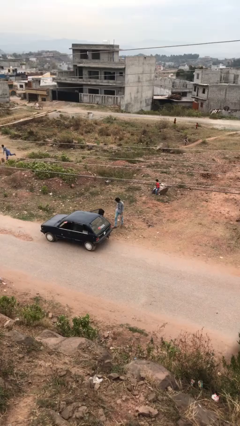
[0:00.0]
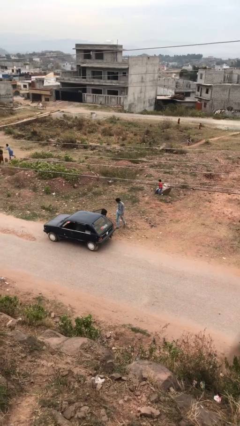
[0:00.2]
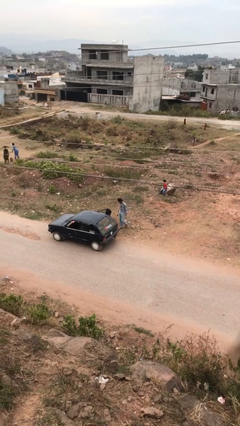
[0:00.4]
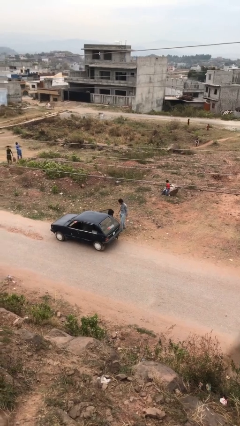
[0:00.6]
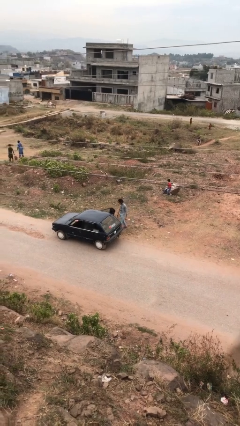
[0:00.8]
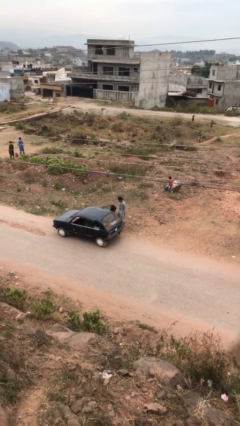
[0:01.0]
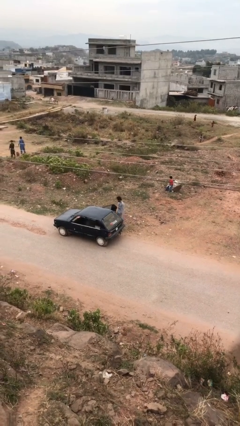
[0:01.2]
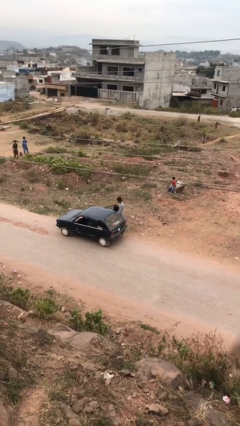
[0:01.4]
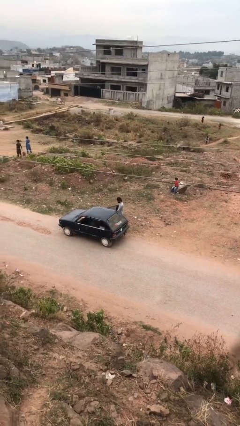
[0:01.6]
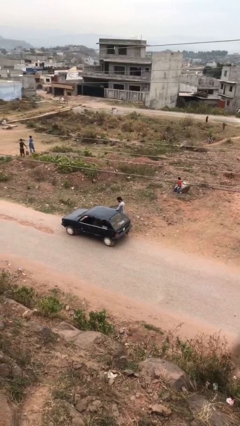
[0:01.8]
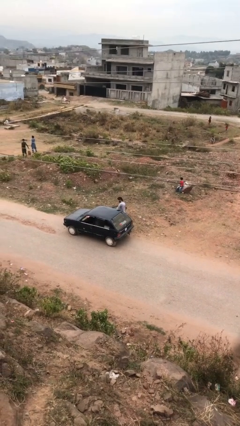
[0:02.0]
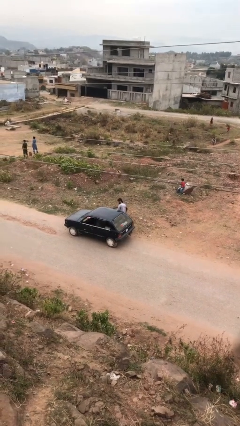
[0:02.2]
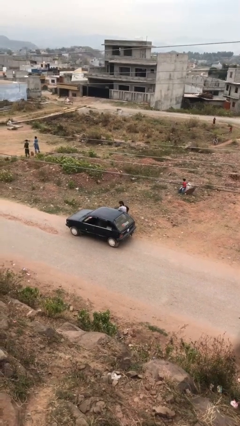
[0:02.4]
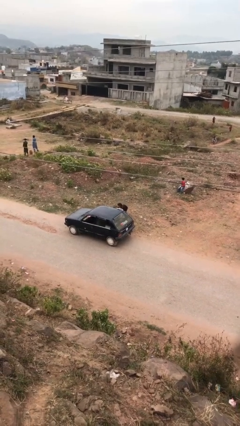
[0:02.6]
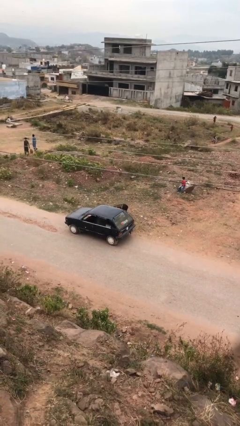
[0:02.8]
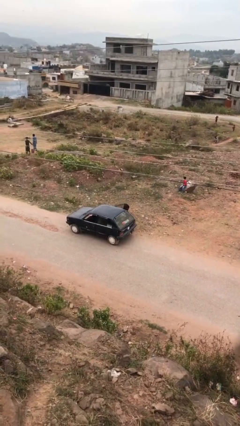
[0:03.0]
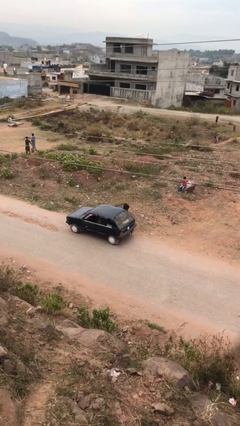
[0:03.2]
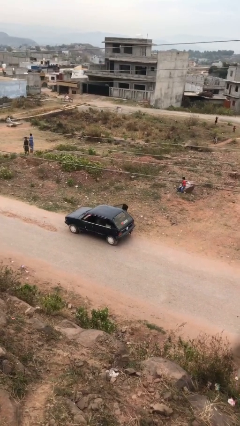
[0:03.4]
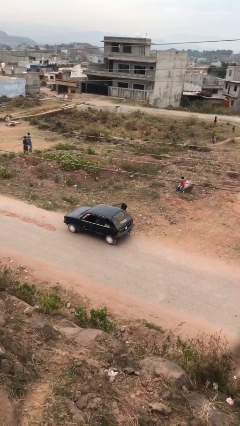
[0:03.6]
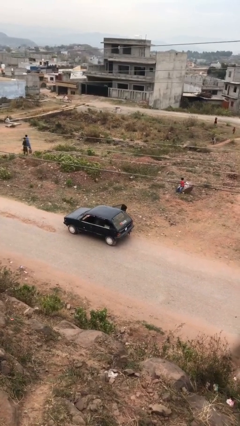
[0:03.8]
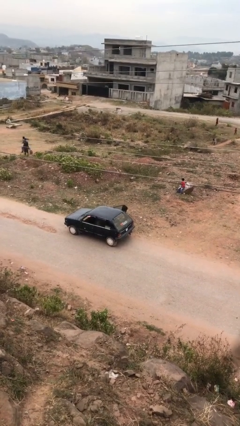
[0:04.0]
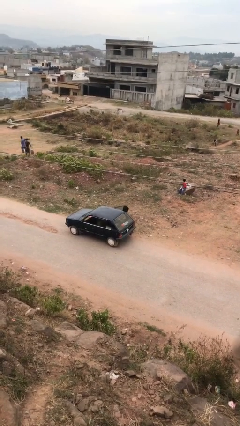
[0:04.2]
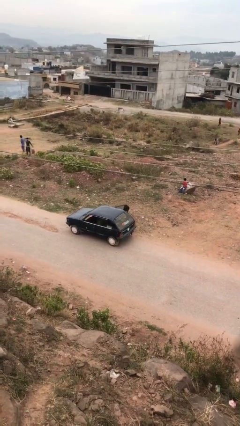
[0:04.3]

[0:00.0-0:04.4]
person enters car

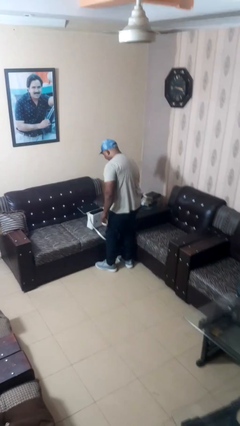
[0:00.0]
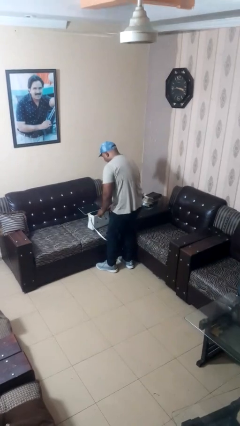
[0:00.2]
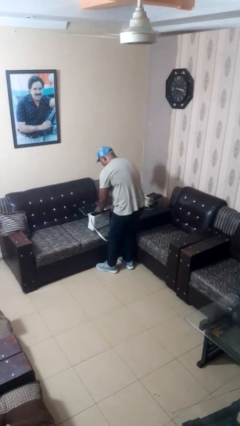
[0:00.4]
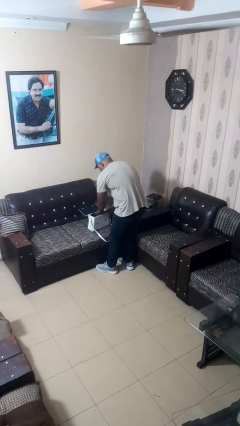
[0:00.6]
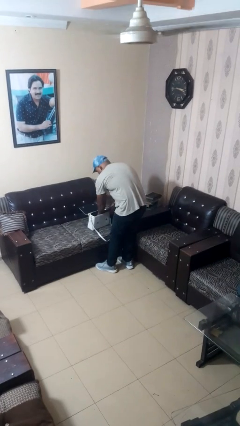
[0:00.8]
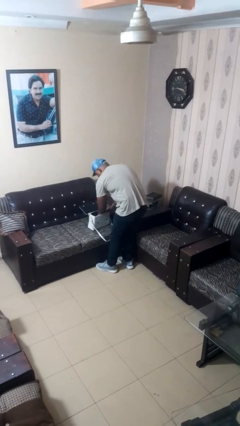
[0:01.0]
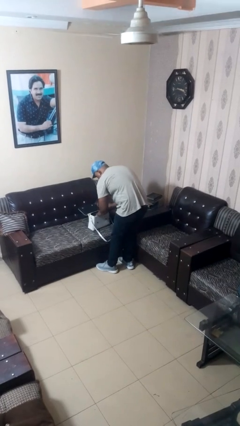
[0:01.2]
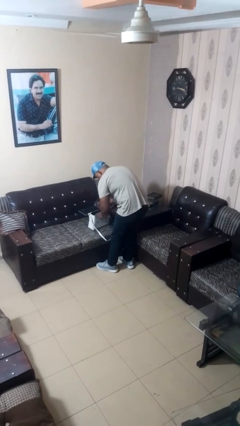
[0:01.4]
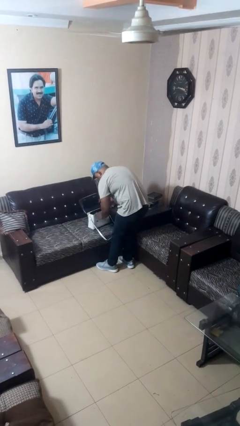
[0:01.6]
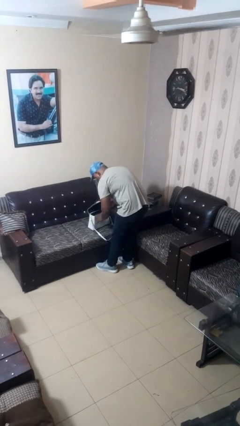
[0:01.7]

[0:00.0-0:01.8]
person puts object into purse

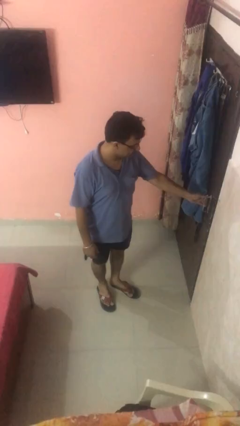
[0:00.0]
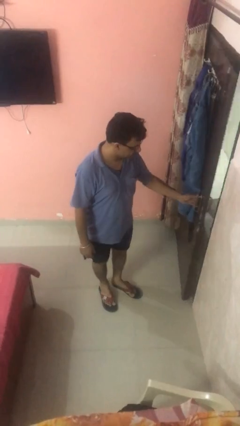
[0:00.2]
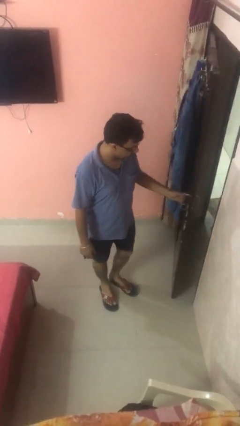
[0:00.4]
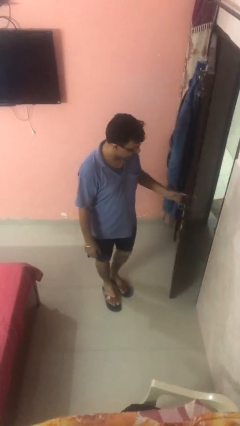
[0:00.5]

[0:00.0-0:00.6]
person opens facility door

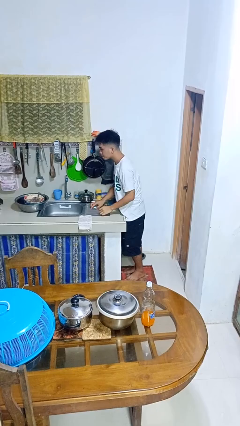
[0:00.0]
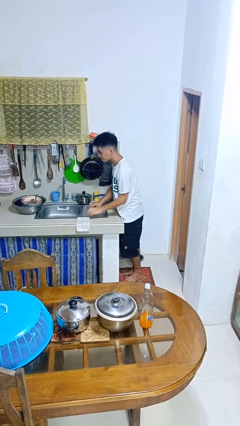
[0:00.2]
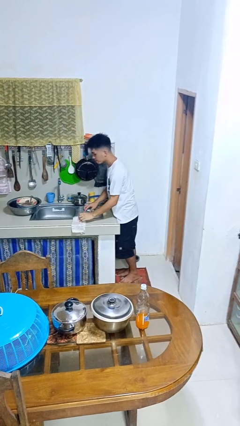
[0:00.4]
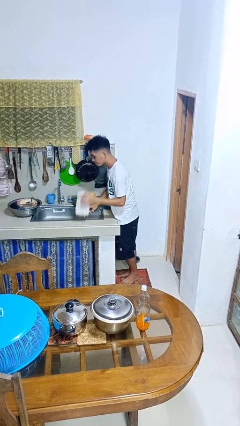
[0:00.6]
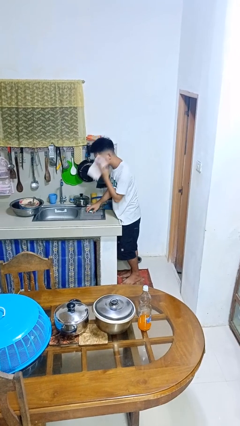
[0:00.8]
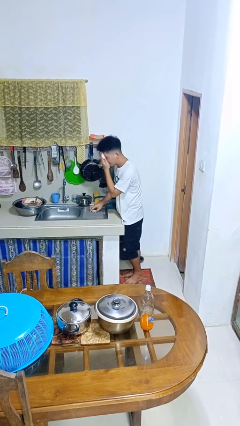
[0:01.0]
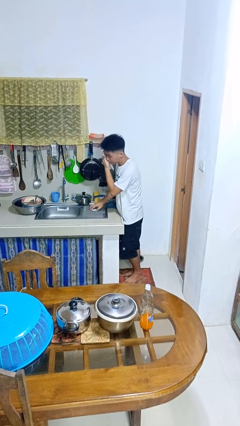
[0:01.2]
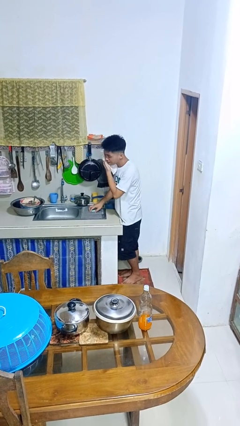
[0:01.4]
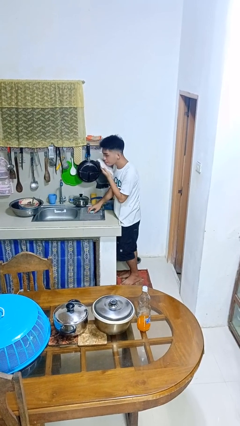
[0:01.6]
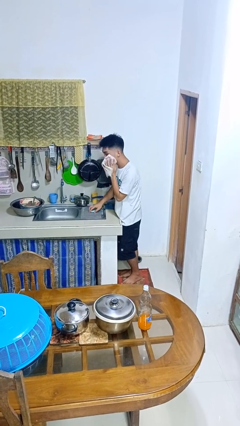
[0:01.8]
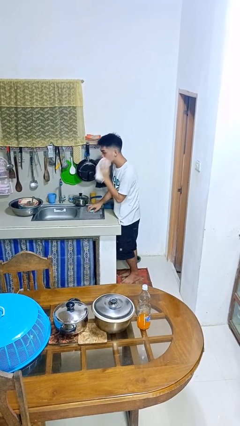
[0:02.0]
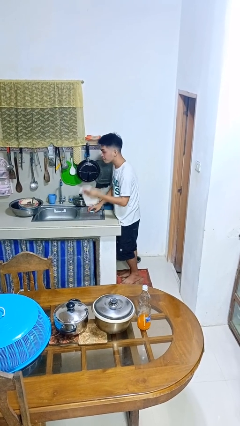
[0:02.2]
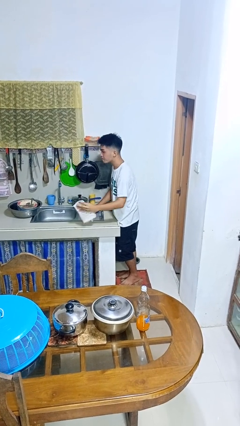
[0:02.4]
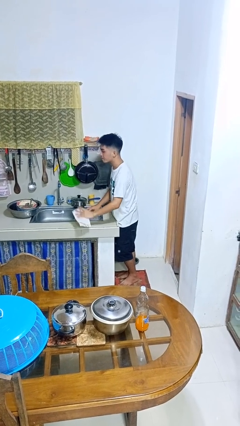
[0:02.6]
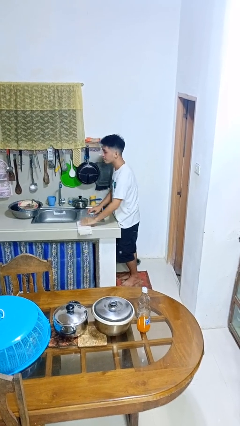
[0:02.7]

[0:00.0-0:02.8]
person dries face with towel

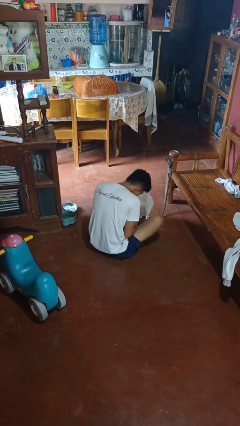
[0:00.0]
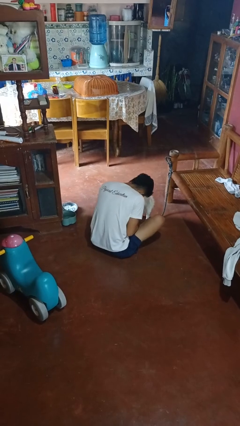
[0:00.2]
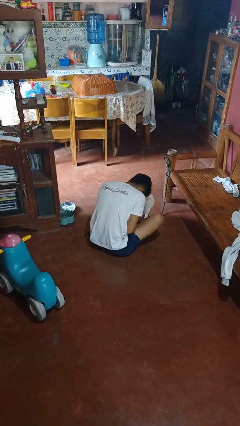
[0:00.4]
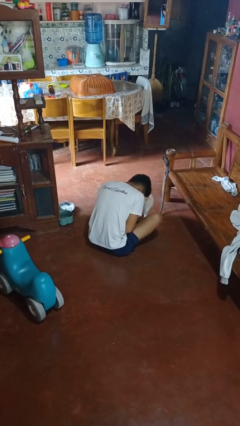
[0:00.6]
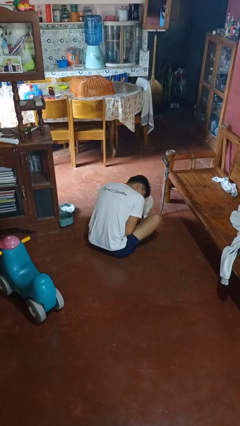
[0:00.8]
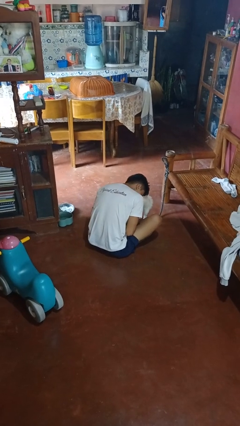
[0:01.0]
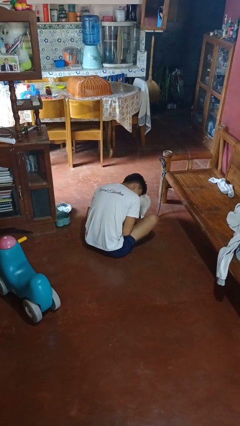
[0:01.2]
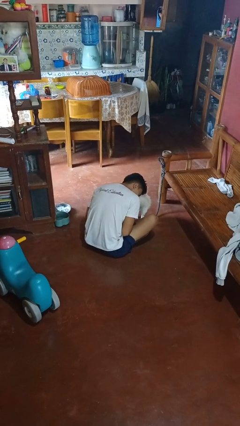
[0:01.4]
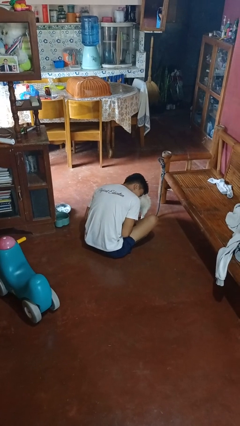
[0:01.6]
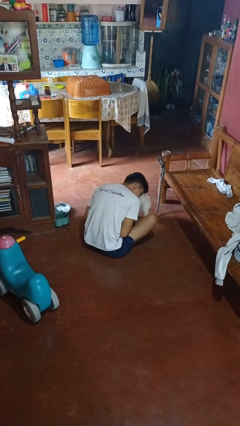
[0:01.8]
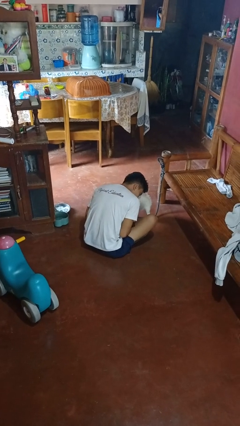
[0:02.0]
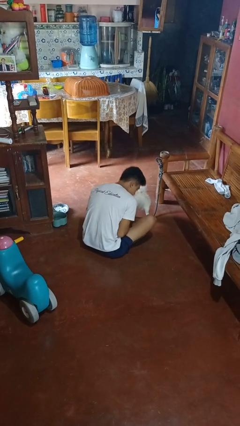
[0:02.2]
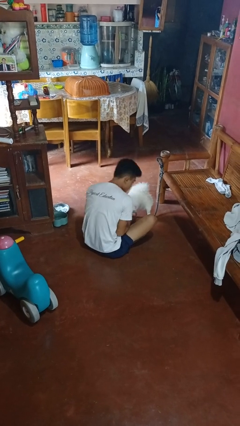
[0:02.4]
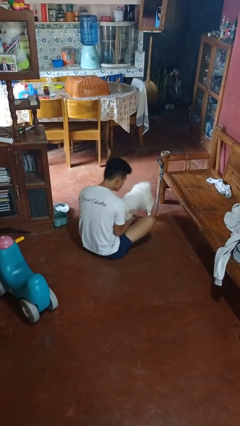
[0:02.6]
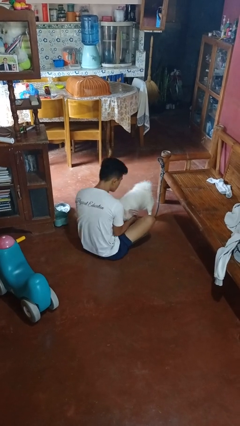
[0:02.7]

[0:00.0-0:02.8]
person hugs dog

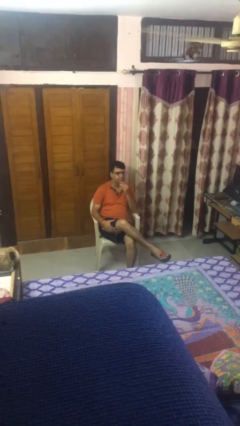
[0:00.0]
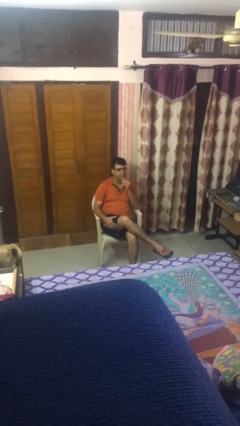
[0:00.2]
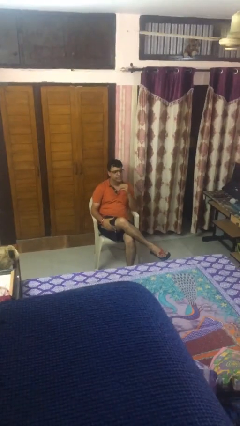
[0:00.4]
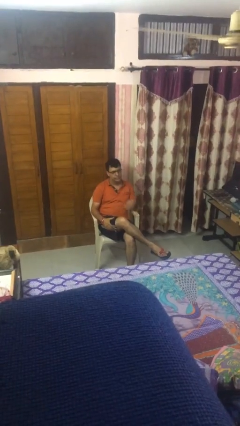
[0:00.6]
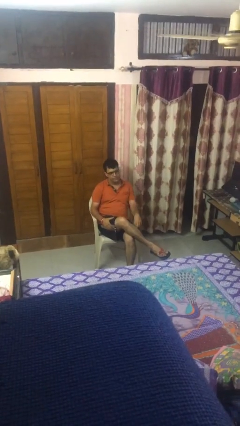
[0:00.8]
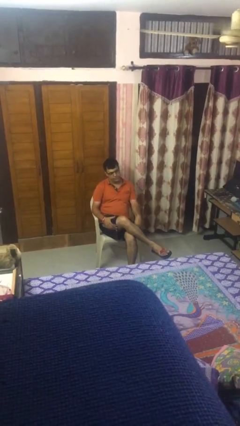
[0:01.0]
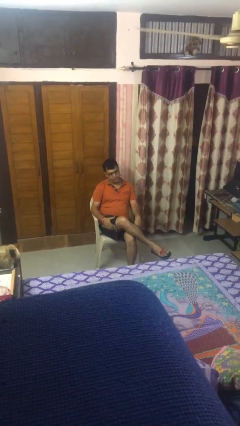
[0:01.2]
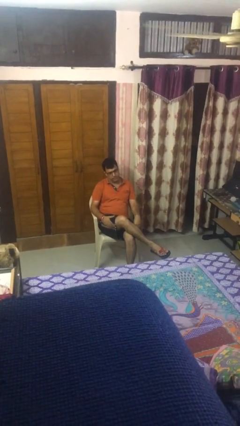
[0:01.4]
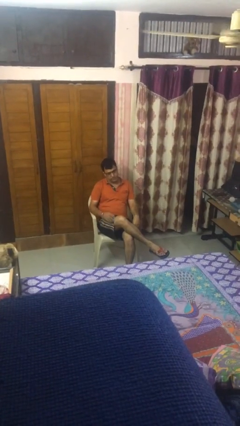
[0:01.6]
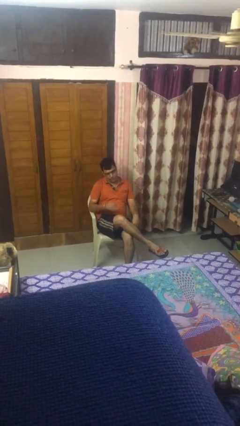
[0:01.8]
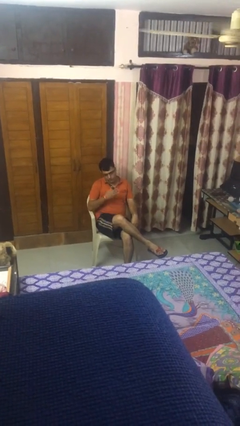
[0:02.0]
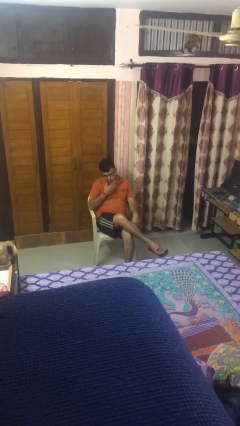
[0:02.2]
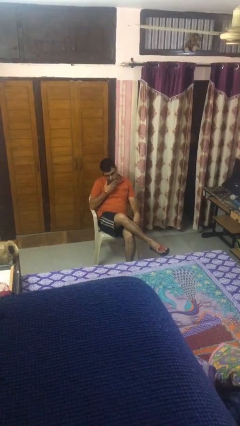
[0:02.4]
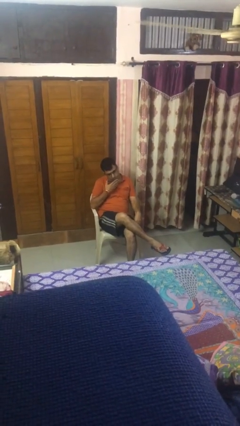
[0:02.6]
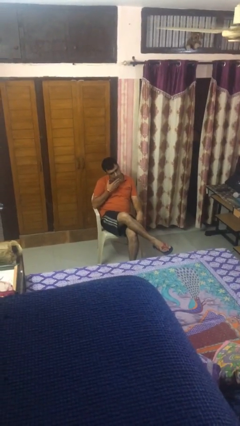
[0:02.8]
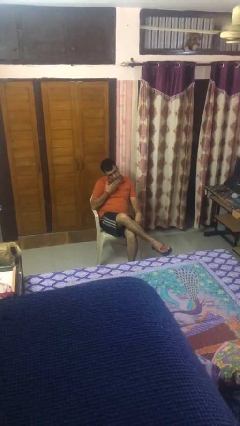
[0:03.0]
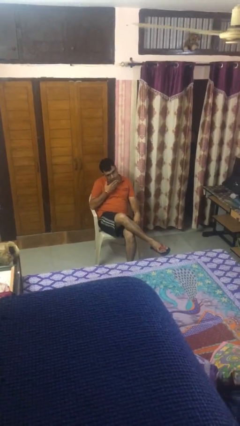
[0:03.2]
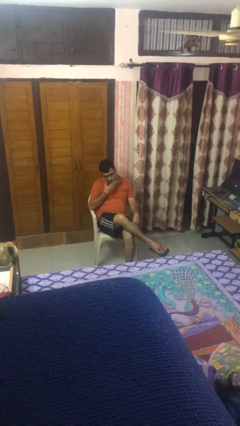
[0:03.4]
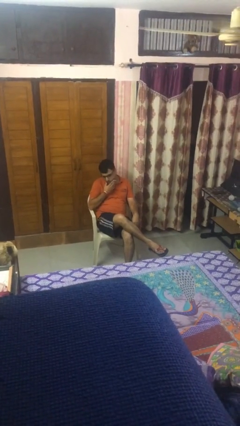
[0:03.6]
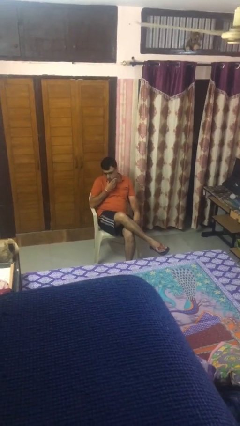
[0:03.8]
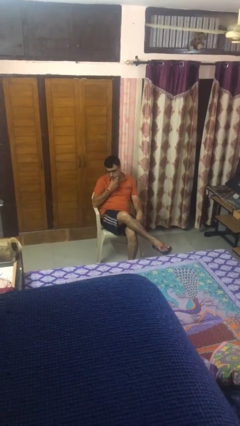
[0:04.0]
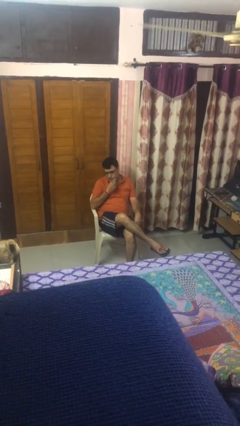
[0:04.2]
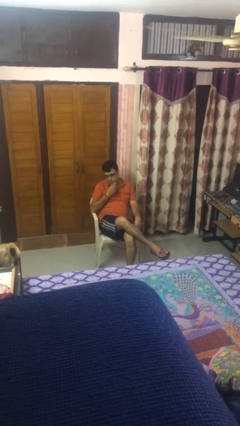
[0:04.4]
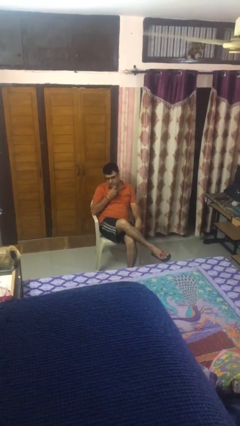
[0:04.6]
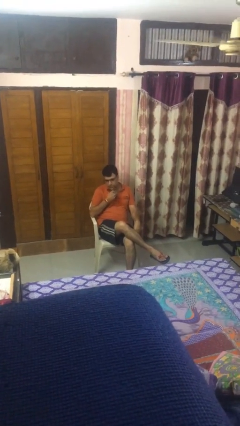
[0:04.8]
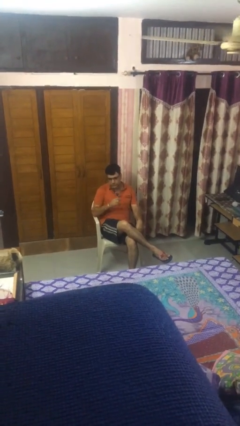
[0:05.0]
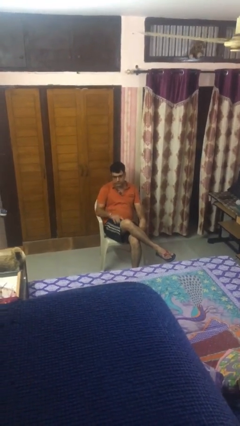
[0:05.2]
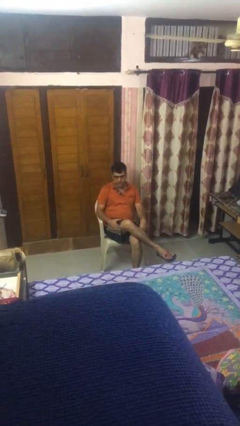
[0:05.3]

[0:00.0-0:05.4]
person strokes chin
